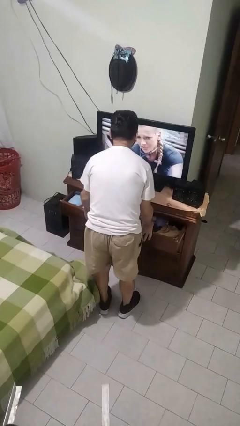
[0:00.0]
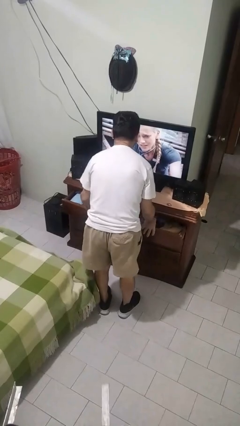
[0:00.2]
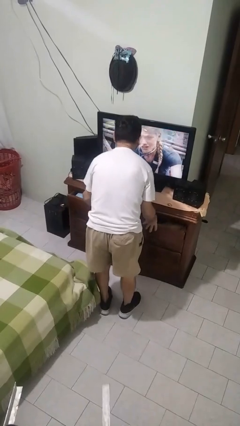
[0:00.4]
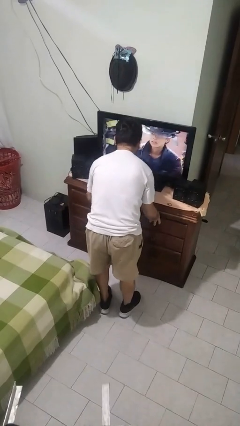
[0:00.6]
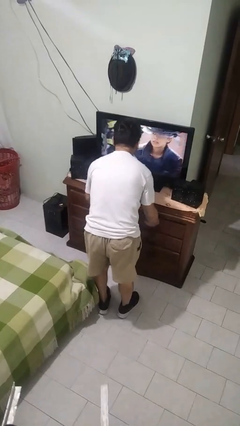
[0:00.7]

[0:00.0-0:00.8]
person closes dresser drawer

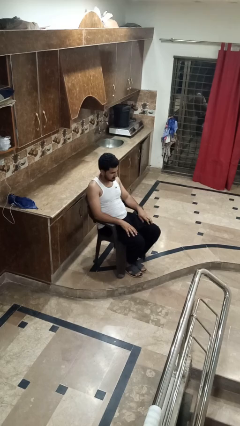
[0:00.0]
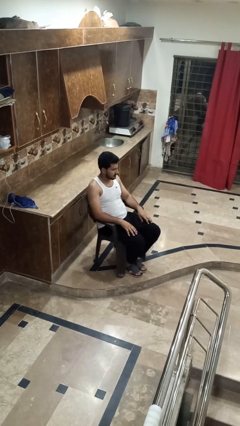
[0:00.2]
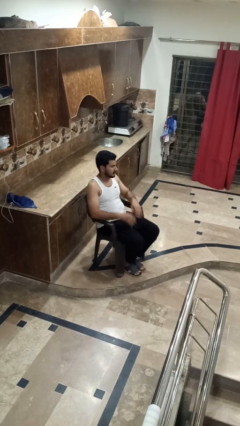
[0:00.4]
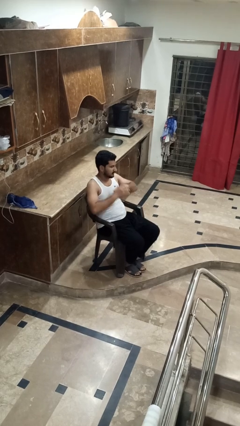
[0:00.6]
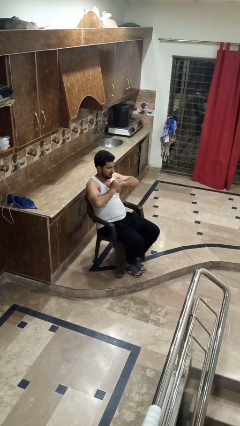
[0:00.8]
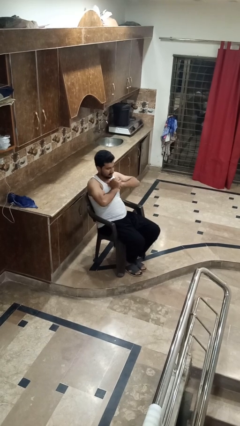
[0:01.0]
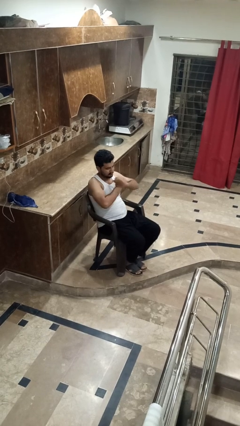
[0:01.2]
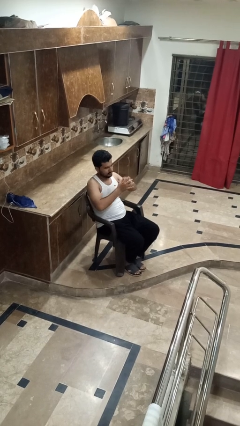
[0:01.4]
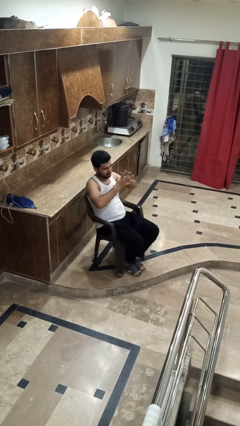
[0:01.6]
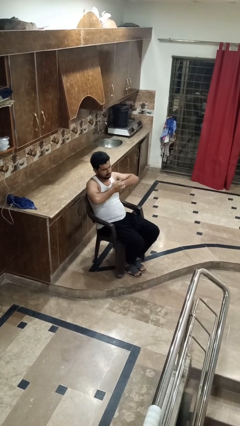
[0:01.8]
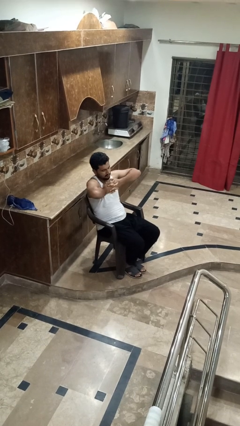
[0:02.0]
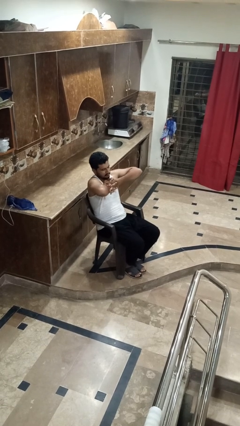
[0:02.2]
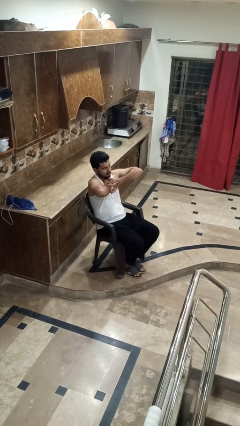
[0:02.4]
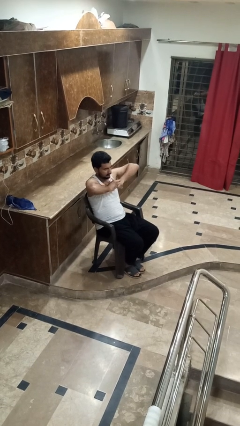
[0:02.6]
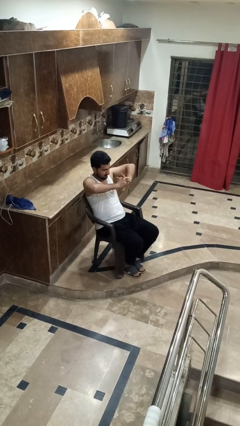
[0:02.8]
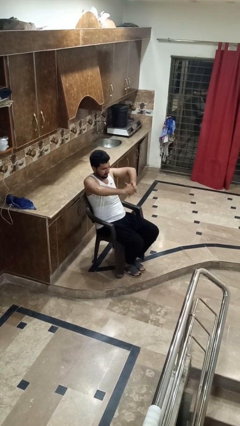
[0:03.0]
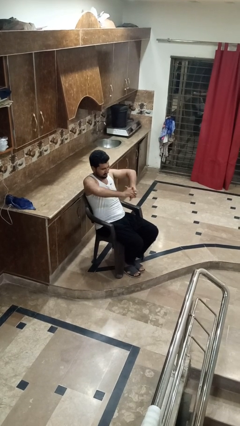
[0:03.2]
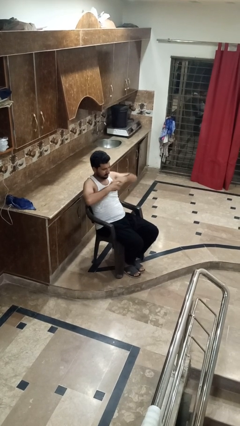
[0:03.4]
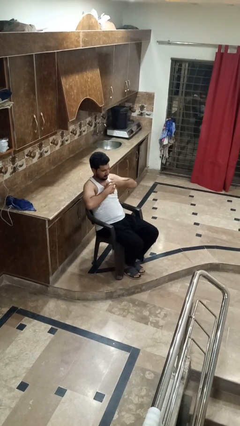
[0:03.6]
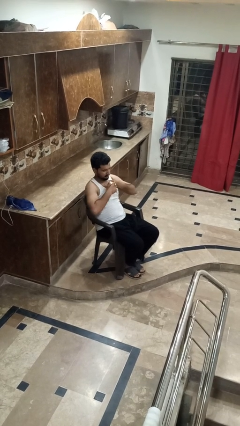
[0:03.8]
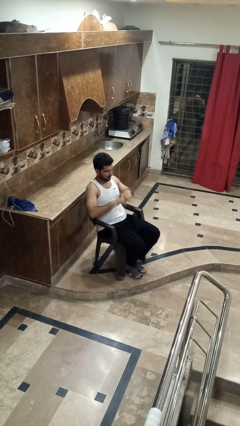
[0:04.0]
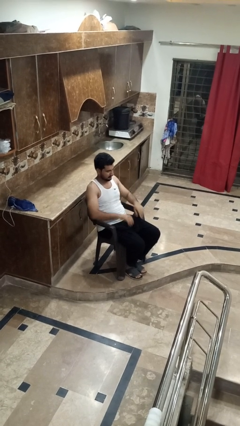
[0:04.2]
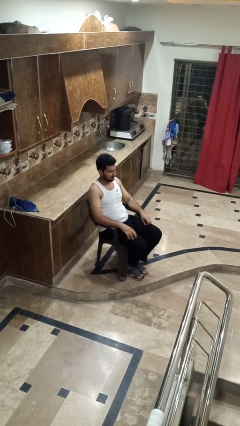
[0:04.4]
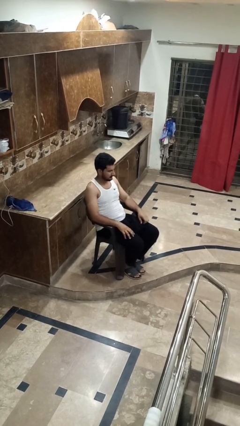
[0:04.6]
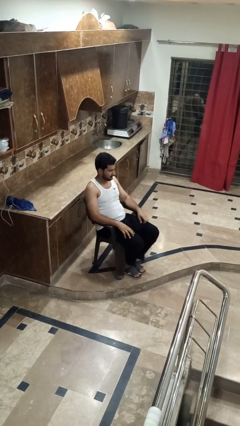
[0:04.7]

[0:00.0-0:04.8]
person cracks knuckles

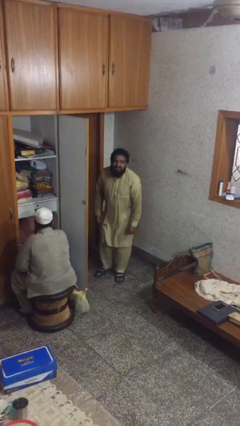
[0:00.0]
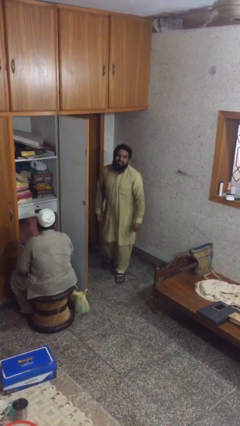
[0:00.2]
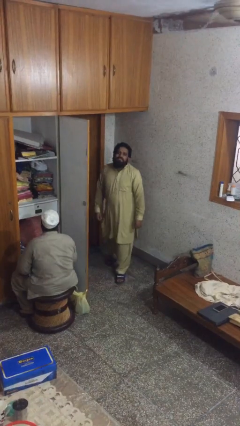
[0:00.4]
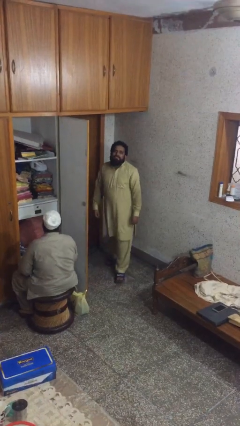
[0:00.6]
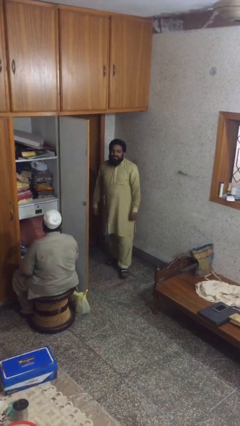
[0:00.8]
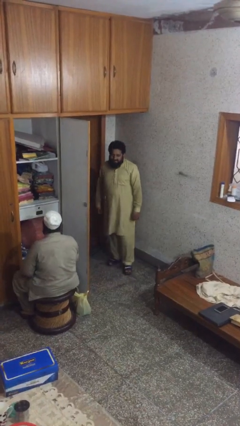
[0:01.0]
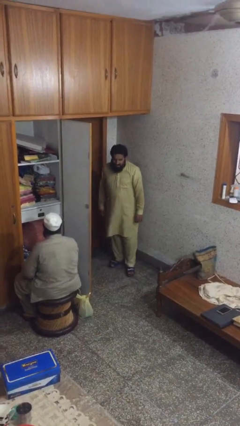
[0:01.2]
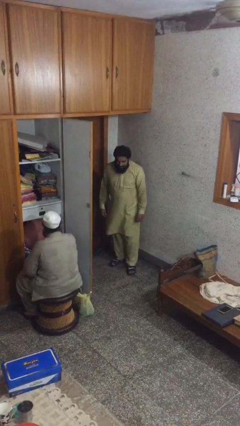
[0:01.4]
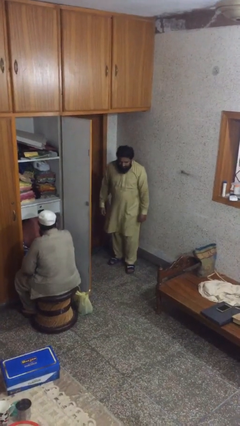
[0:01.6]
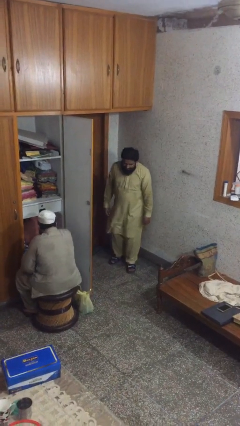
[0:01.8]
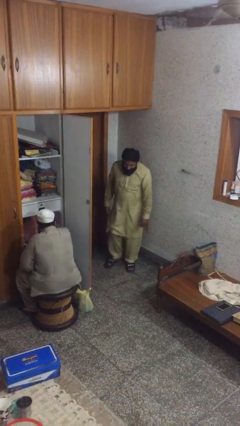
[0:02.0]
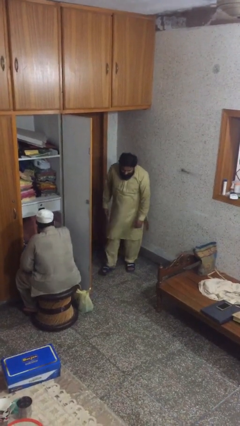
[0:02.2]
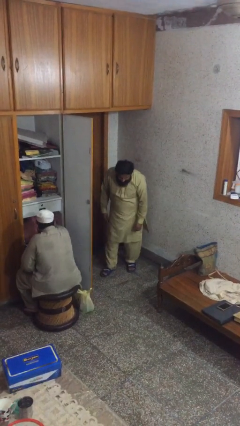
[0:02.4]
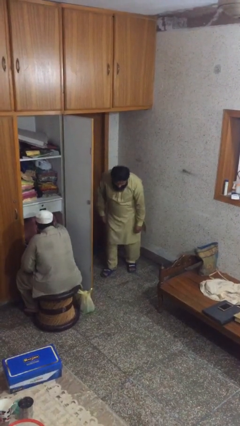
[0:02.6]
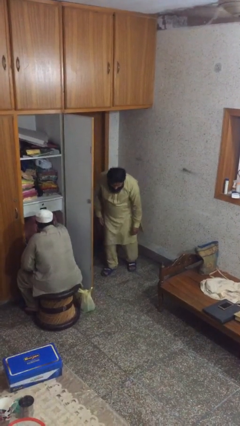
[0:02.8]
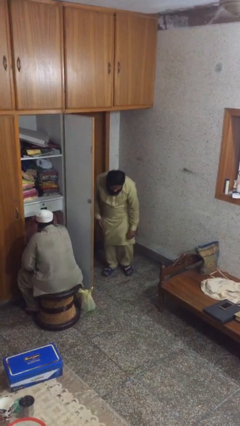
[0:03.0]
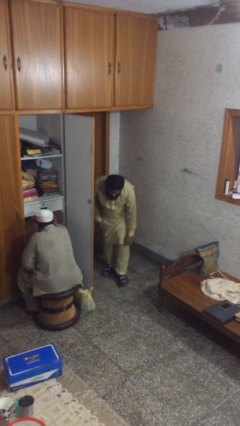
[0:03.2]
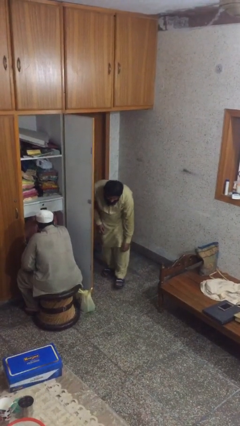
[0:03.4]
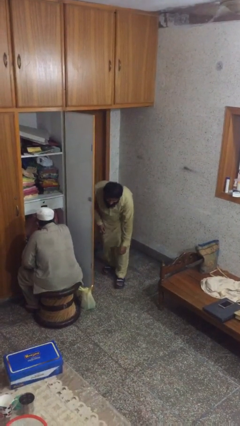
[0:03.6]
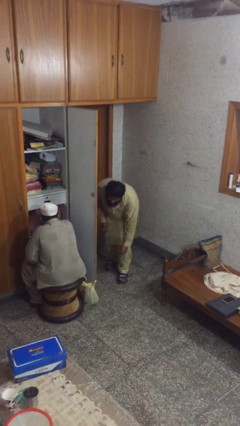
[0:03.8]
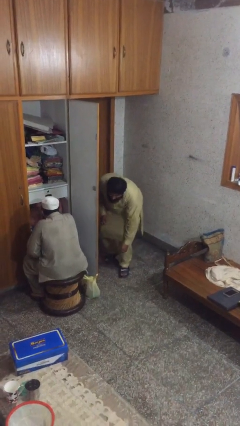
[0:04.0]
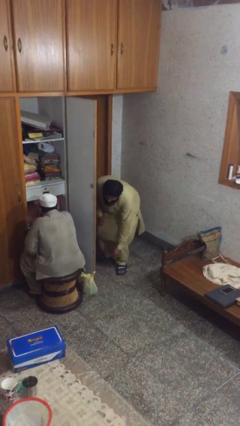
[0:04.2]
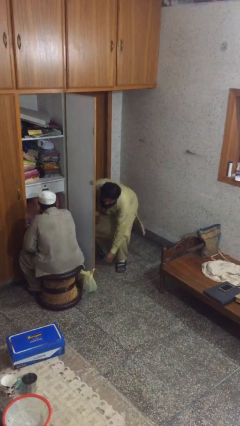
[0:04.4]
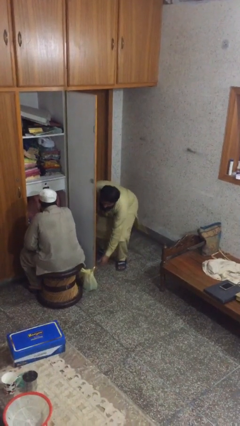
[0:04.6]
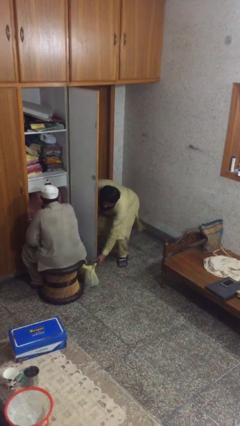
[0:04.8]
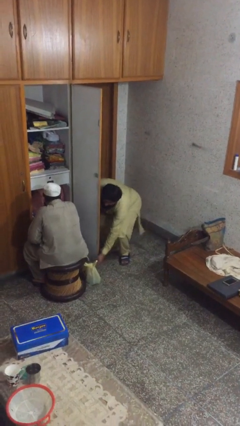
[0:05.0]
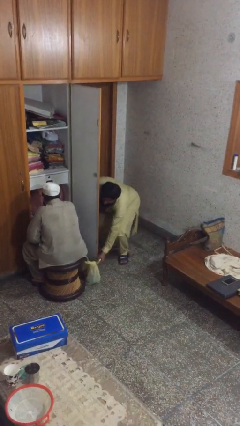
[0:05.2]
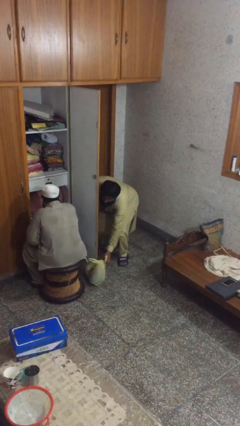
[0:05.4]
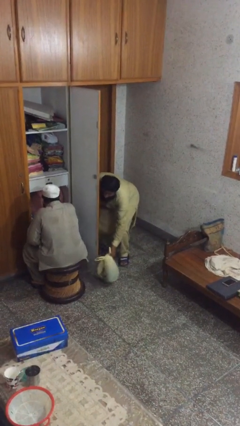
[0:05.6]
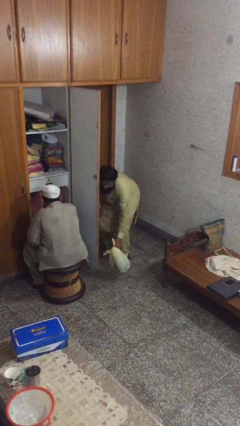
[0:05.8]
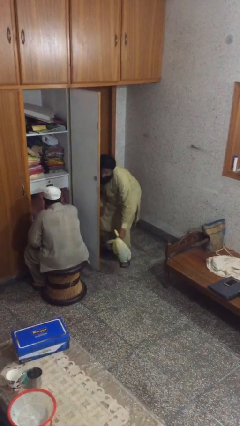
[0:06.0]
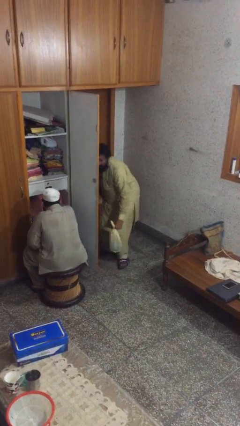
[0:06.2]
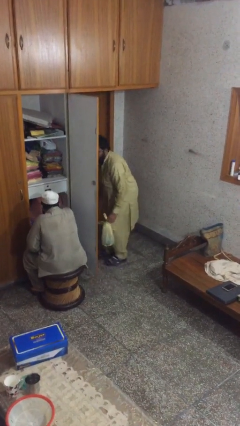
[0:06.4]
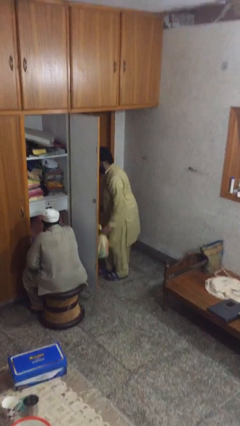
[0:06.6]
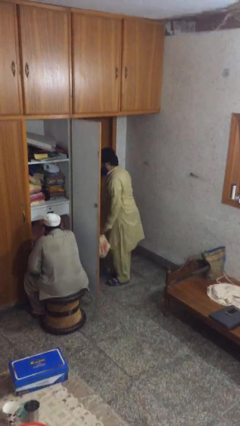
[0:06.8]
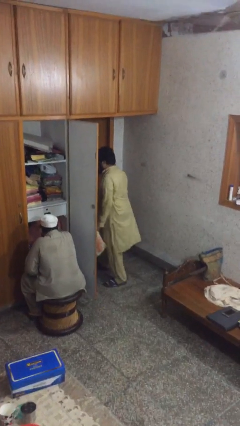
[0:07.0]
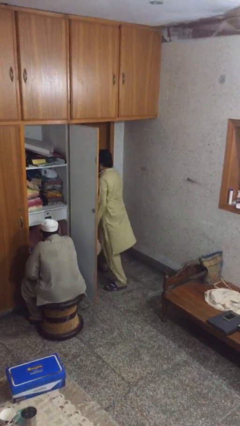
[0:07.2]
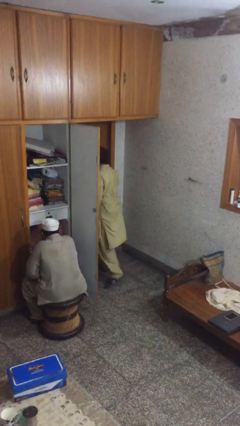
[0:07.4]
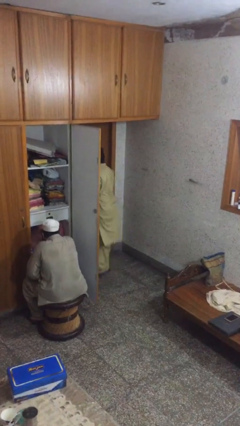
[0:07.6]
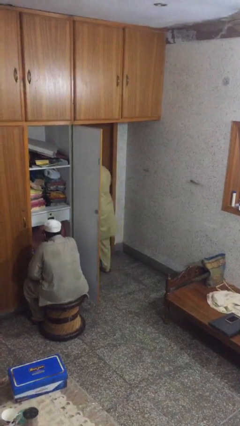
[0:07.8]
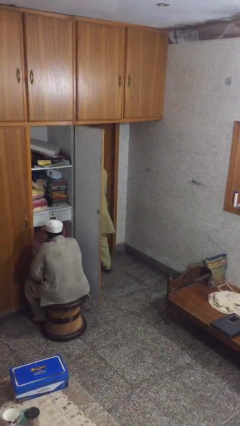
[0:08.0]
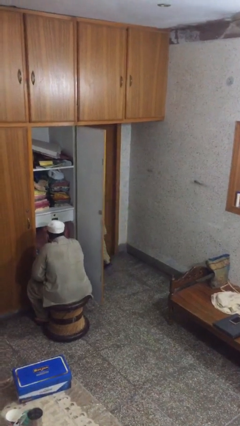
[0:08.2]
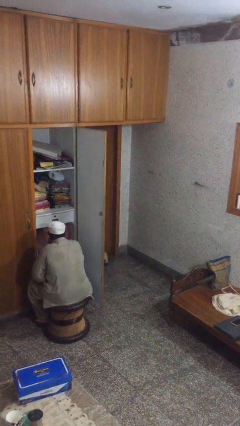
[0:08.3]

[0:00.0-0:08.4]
person steals object from person

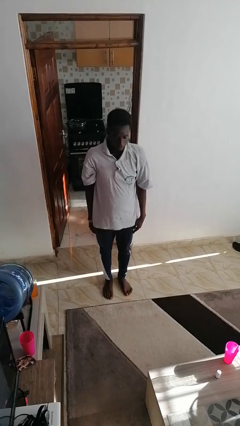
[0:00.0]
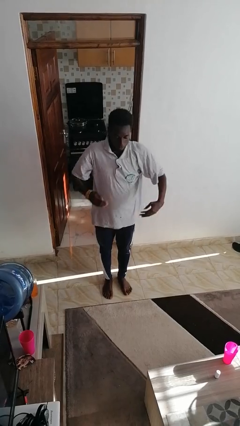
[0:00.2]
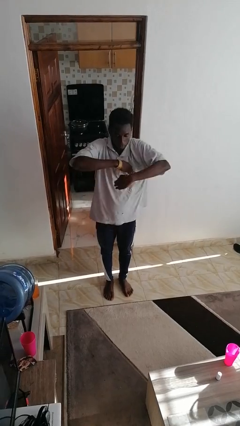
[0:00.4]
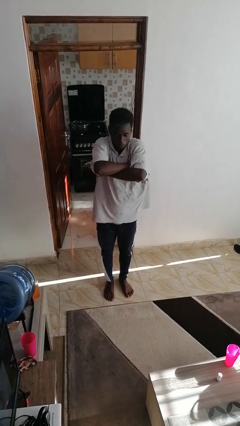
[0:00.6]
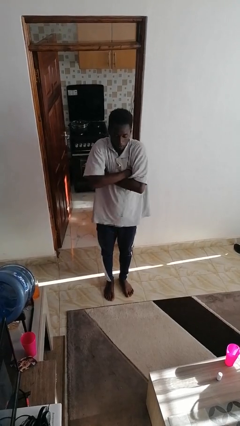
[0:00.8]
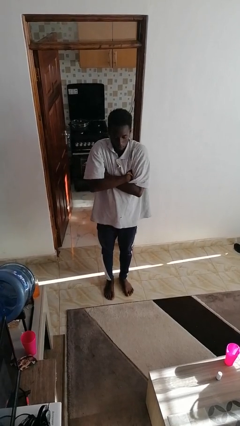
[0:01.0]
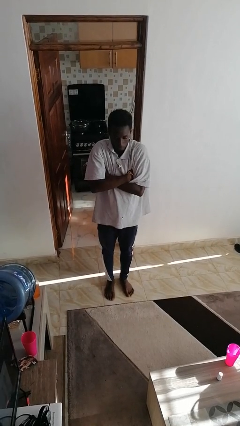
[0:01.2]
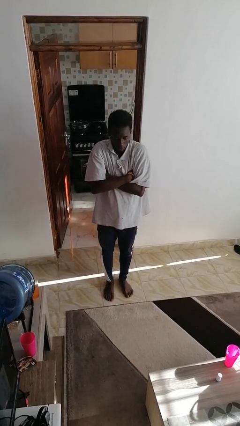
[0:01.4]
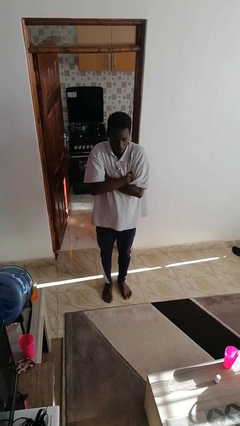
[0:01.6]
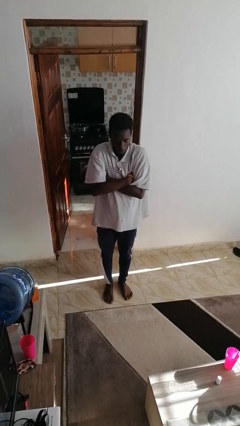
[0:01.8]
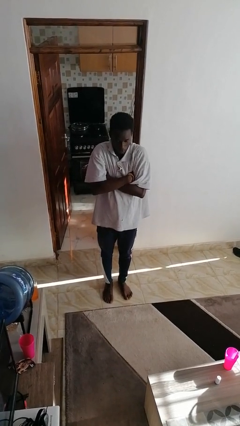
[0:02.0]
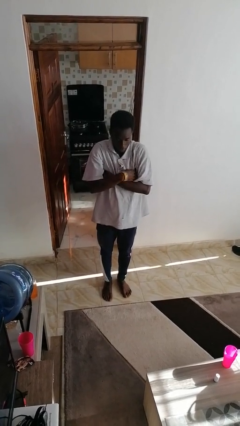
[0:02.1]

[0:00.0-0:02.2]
person crosses arms

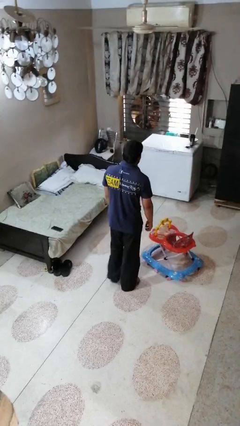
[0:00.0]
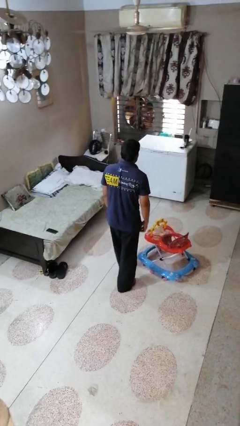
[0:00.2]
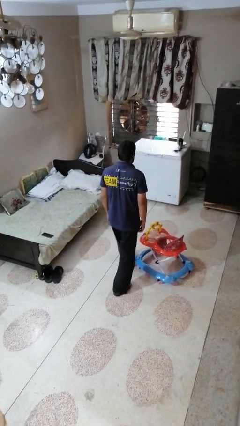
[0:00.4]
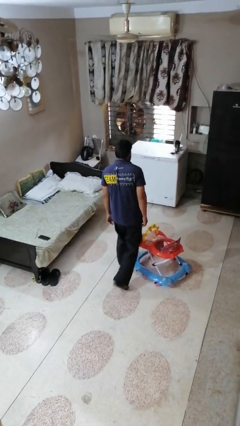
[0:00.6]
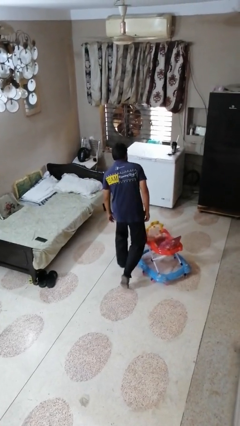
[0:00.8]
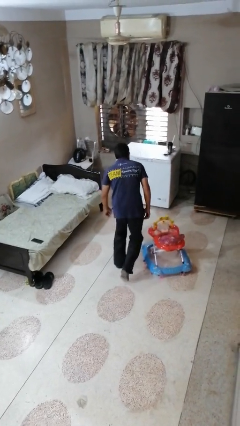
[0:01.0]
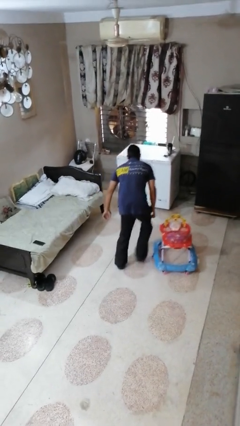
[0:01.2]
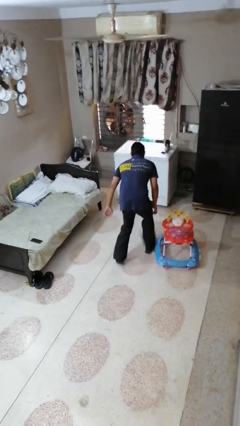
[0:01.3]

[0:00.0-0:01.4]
person trips on object on floor
